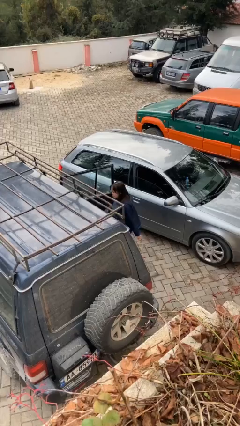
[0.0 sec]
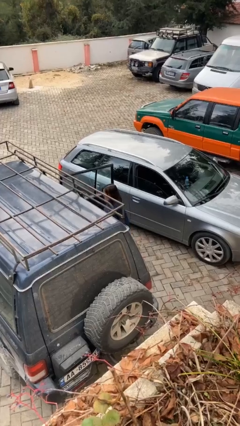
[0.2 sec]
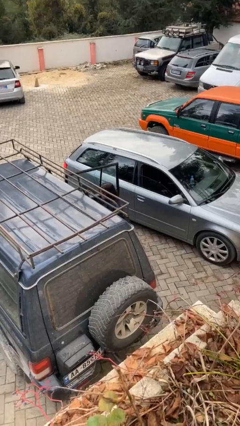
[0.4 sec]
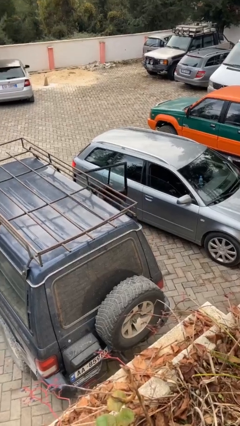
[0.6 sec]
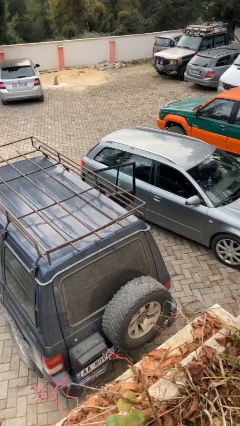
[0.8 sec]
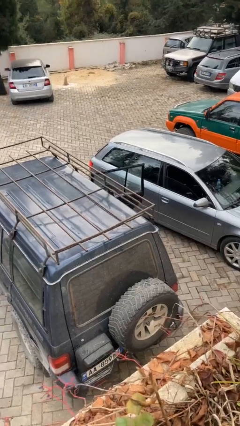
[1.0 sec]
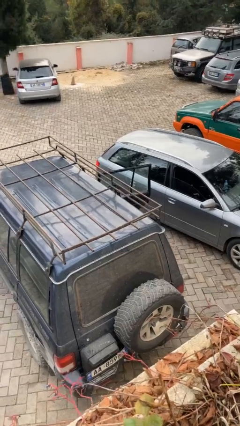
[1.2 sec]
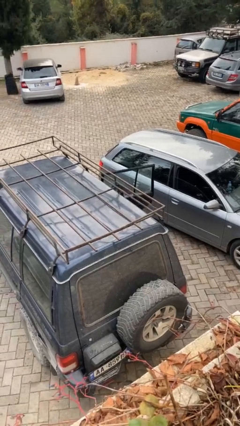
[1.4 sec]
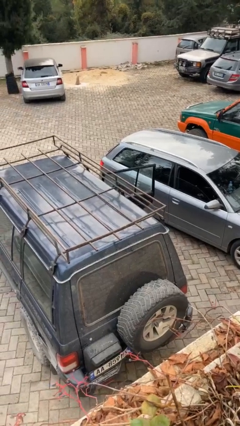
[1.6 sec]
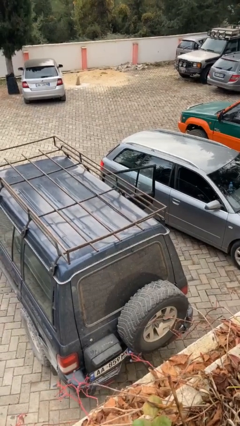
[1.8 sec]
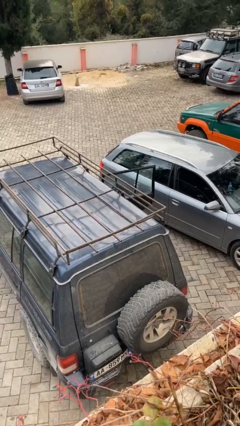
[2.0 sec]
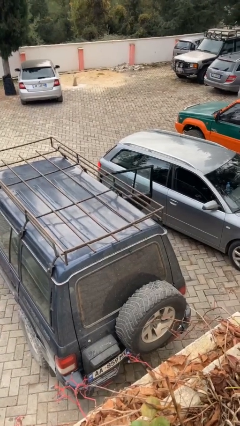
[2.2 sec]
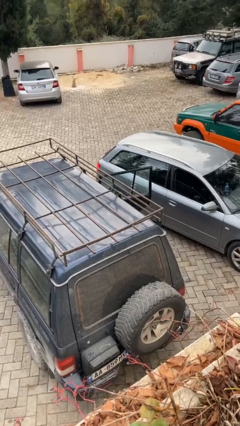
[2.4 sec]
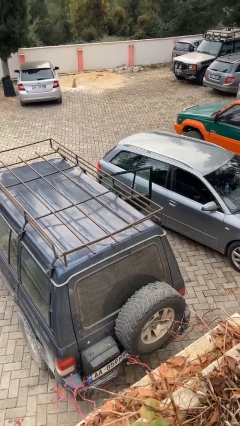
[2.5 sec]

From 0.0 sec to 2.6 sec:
person enters car

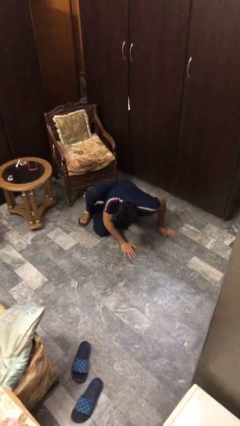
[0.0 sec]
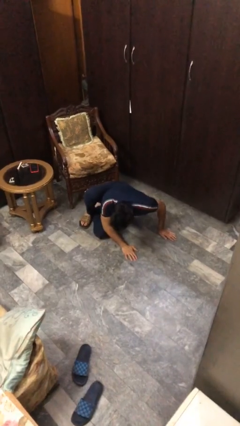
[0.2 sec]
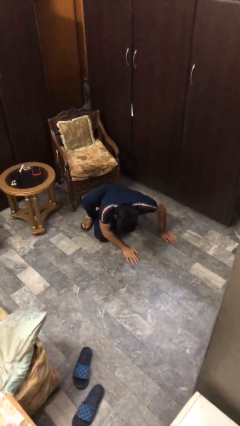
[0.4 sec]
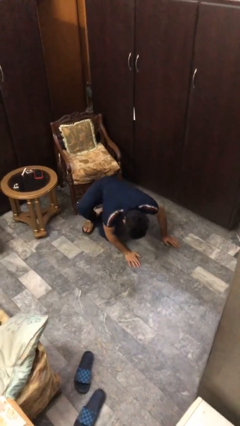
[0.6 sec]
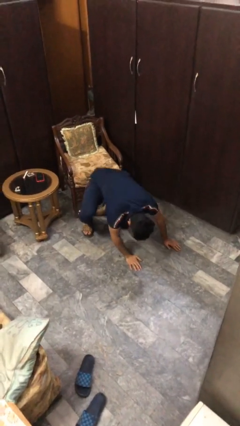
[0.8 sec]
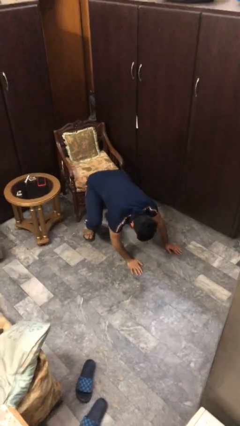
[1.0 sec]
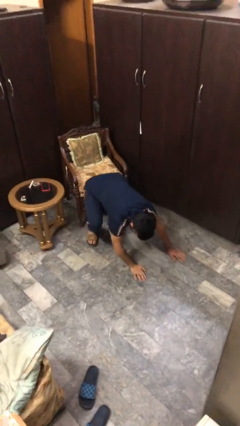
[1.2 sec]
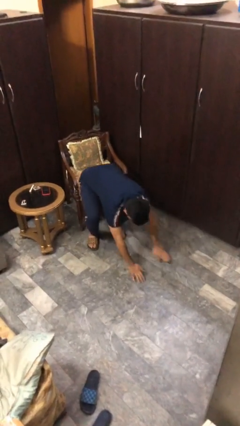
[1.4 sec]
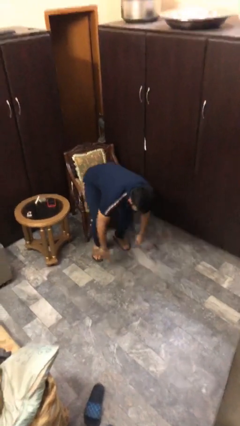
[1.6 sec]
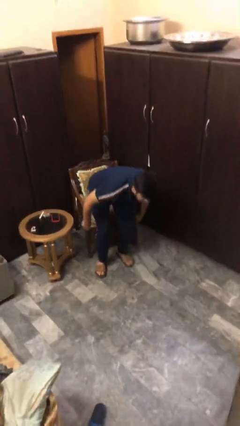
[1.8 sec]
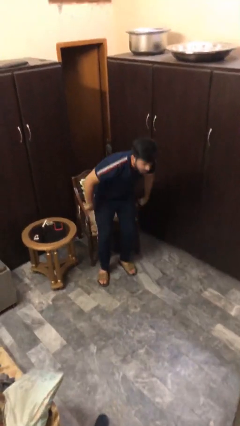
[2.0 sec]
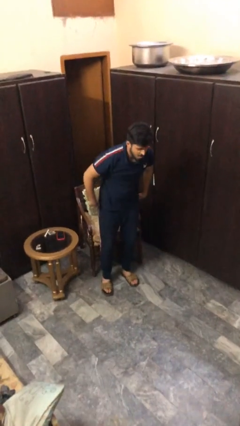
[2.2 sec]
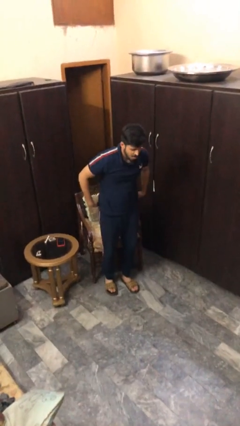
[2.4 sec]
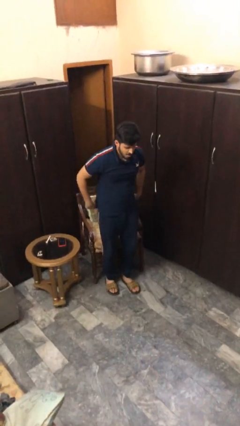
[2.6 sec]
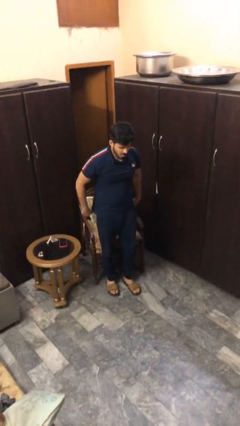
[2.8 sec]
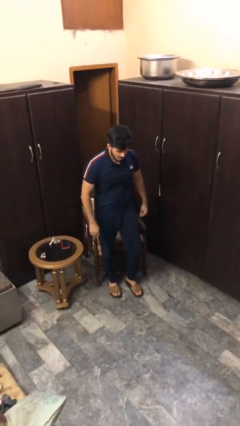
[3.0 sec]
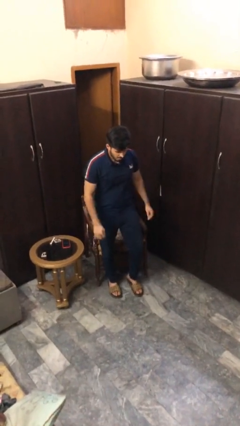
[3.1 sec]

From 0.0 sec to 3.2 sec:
person stands up from floor

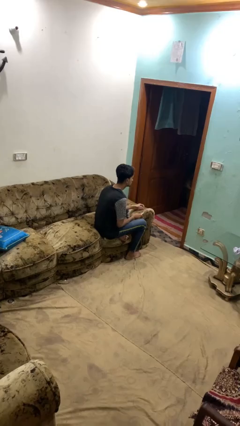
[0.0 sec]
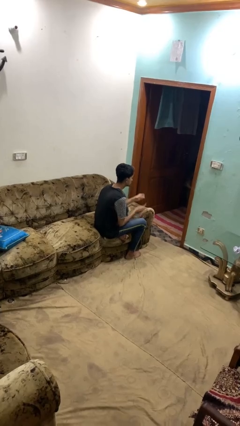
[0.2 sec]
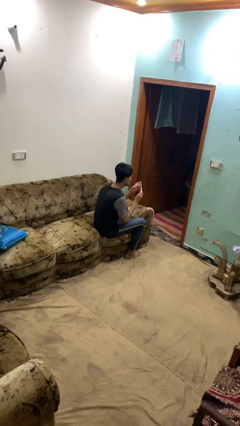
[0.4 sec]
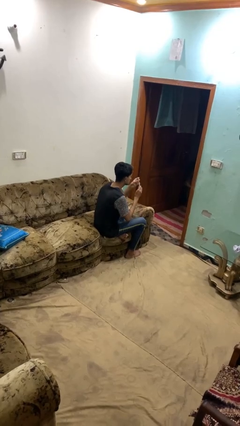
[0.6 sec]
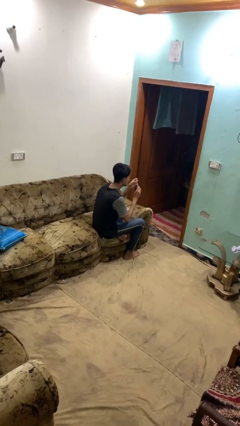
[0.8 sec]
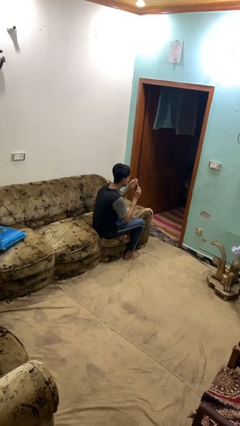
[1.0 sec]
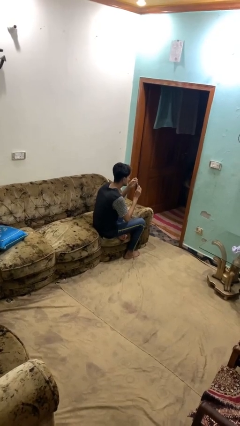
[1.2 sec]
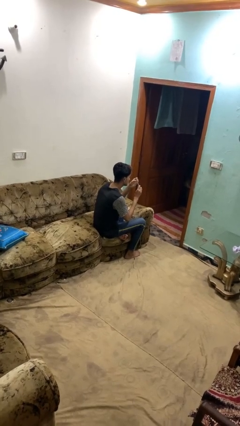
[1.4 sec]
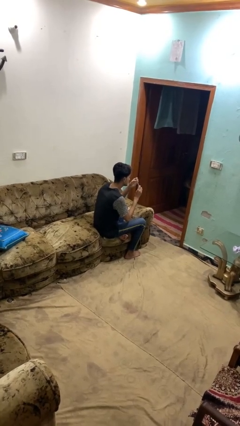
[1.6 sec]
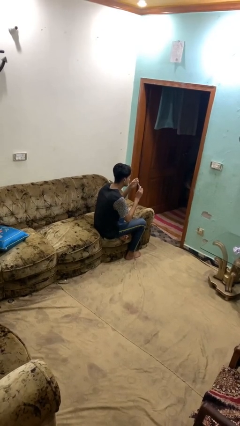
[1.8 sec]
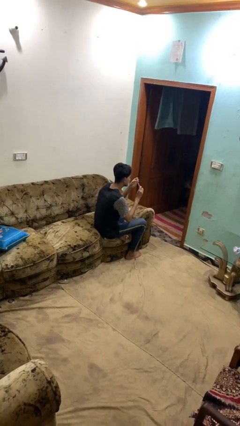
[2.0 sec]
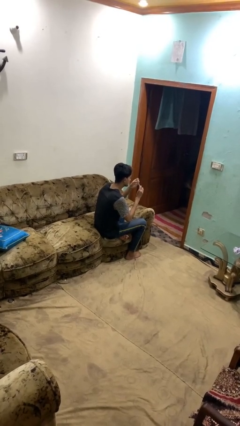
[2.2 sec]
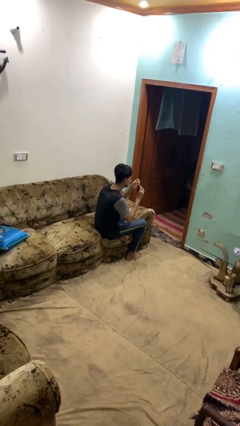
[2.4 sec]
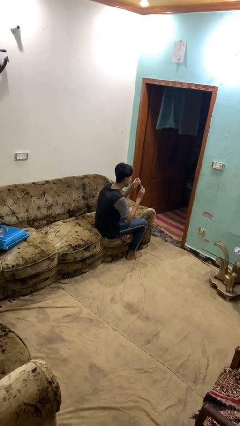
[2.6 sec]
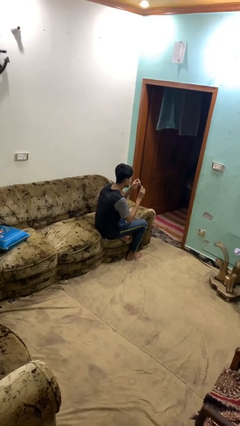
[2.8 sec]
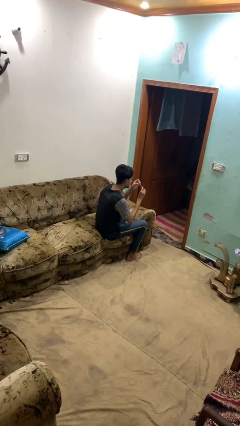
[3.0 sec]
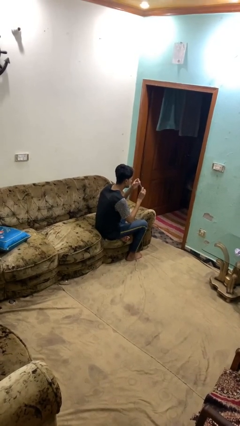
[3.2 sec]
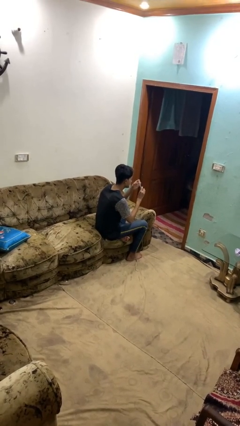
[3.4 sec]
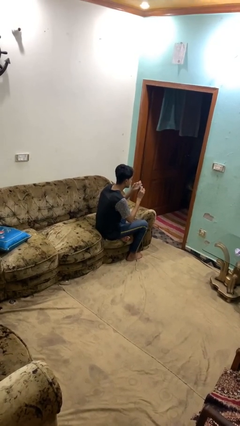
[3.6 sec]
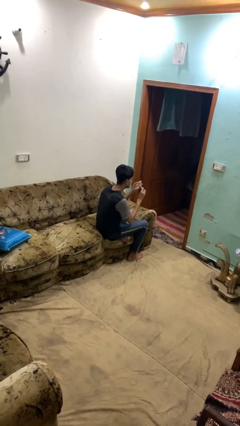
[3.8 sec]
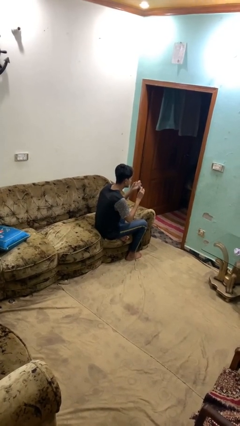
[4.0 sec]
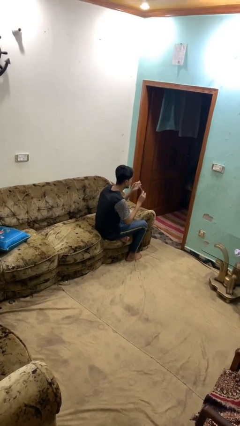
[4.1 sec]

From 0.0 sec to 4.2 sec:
person files fingernails

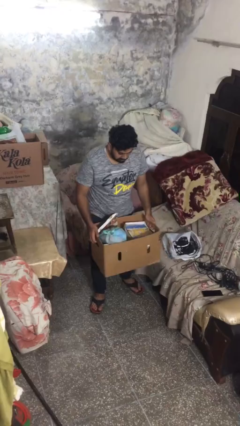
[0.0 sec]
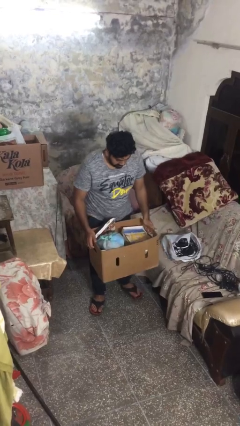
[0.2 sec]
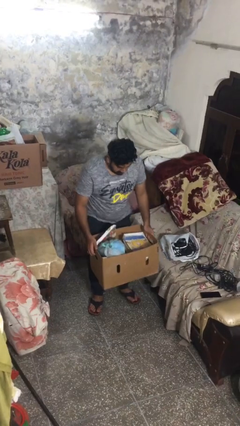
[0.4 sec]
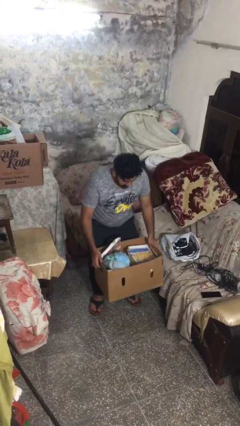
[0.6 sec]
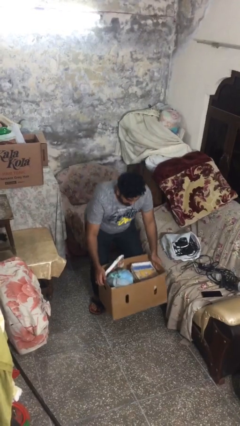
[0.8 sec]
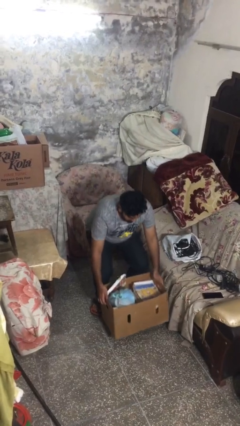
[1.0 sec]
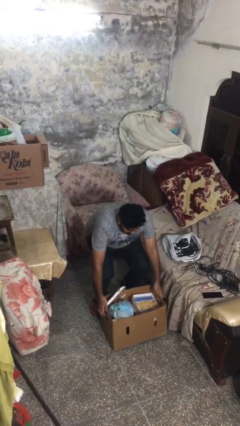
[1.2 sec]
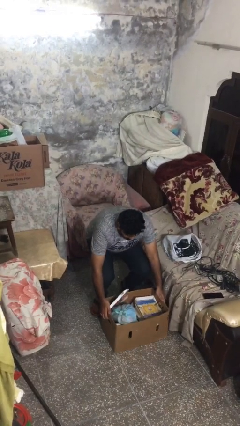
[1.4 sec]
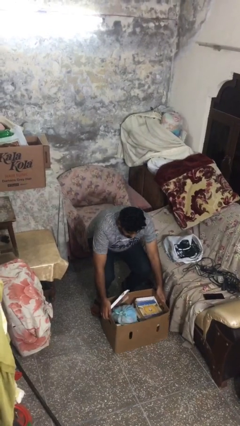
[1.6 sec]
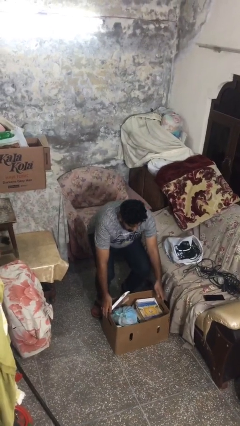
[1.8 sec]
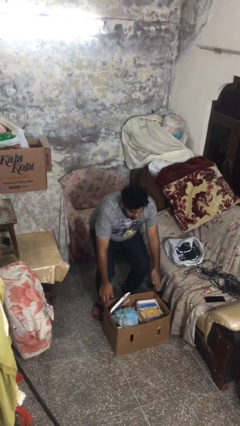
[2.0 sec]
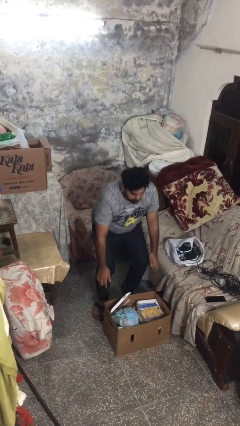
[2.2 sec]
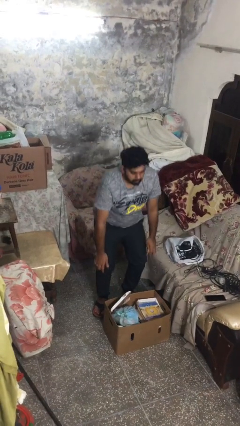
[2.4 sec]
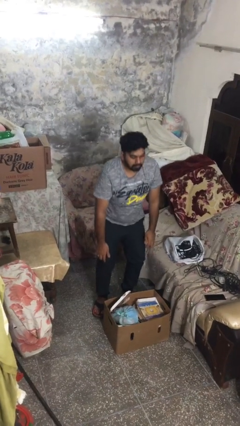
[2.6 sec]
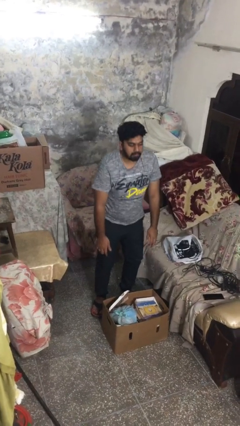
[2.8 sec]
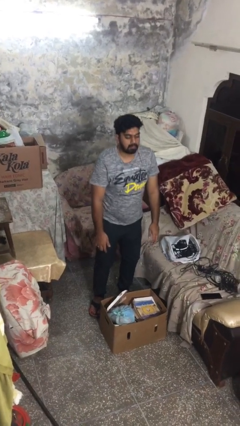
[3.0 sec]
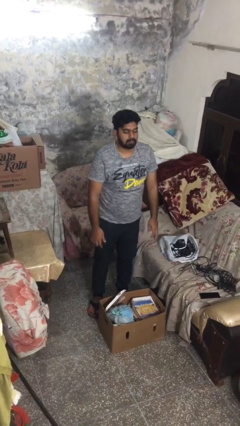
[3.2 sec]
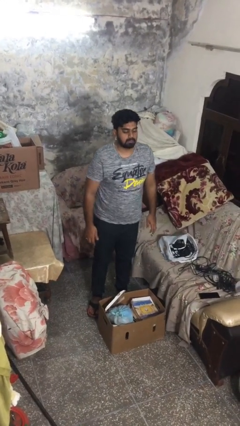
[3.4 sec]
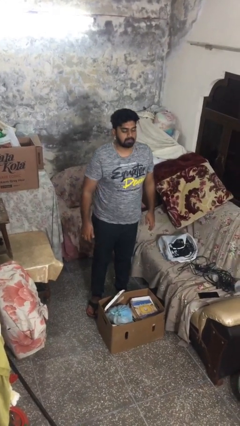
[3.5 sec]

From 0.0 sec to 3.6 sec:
person puts down object on floor

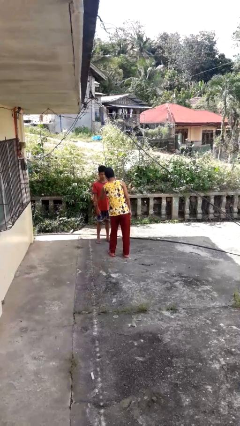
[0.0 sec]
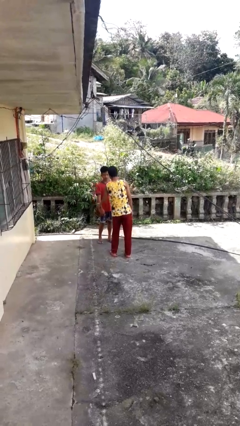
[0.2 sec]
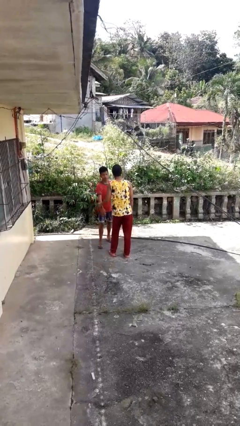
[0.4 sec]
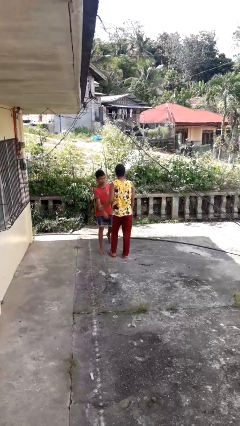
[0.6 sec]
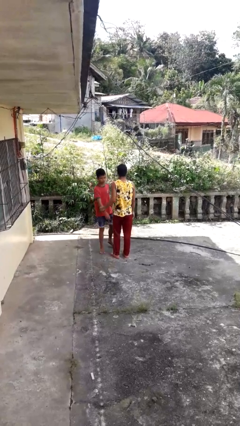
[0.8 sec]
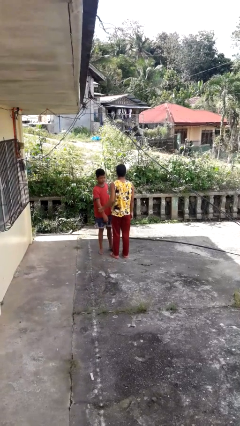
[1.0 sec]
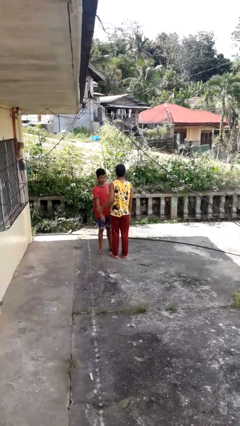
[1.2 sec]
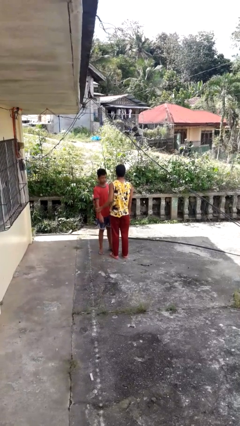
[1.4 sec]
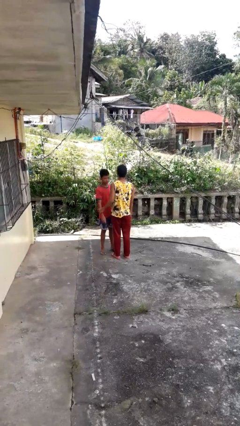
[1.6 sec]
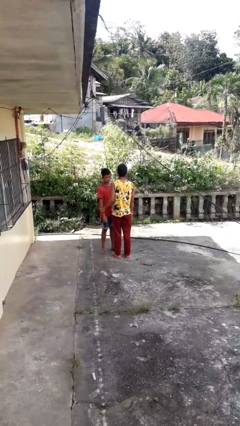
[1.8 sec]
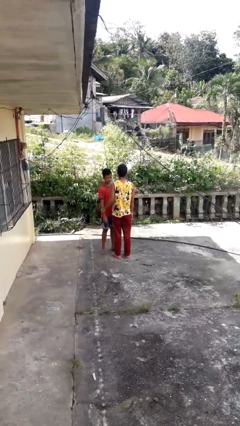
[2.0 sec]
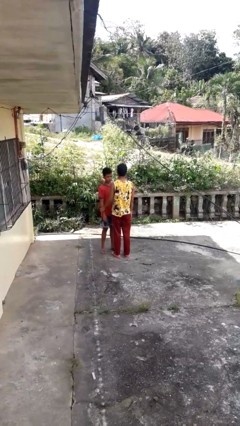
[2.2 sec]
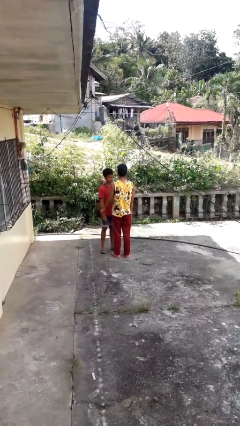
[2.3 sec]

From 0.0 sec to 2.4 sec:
person grabs person by forearm

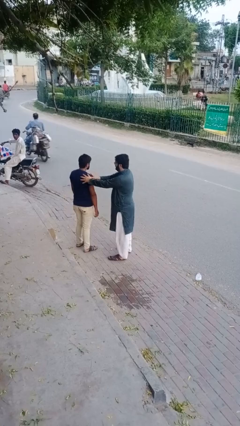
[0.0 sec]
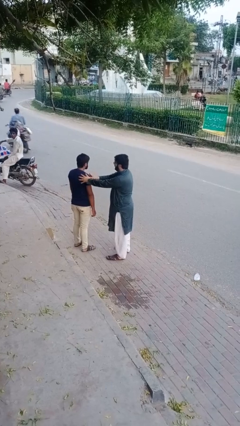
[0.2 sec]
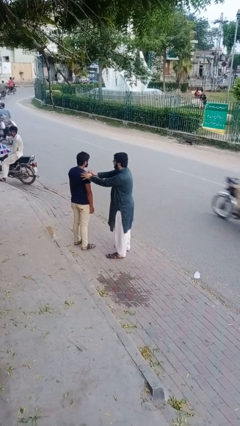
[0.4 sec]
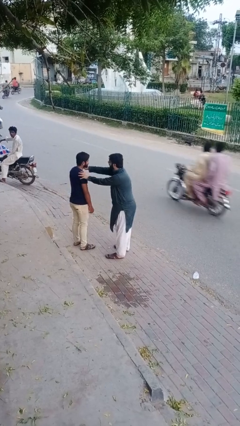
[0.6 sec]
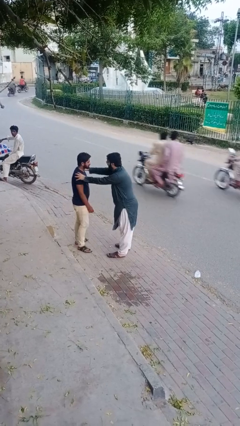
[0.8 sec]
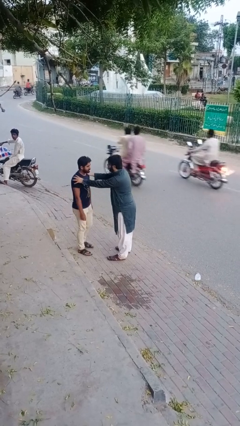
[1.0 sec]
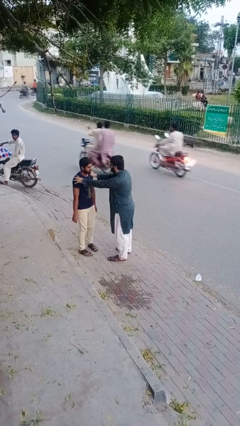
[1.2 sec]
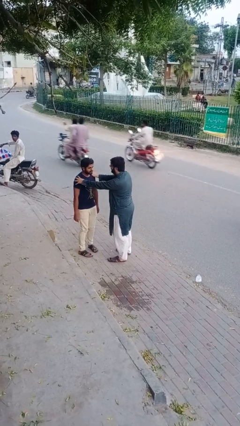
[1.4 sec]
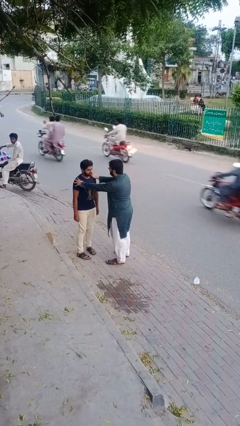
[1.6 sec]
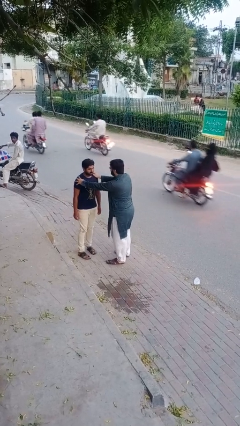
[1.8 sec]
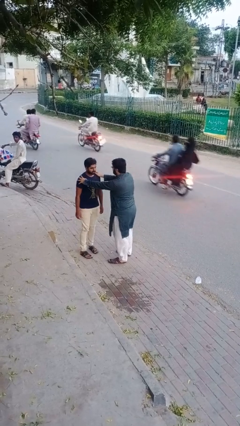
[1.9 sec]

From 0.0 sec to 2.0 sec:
person spins person around
